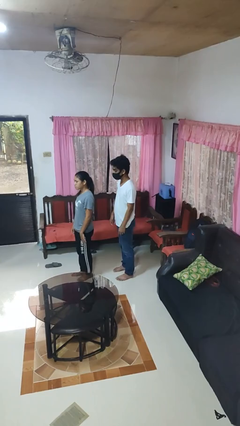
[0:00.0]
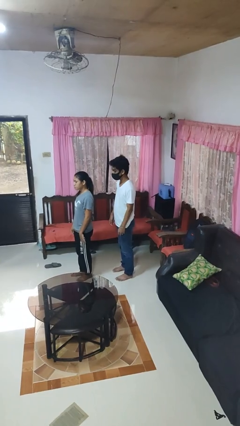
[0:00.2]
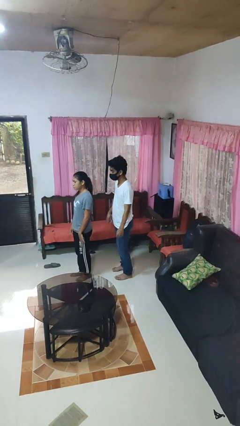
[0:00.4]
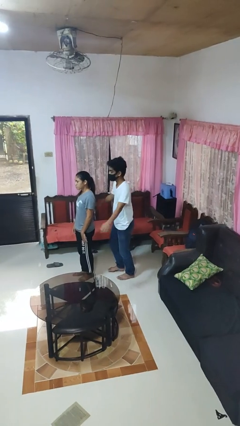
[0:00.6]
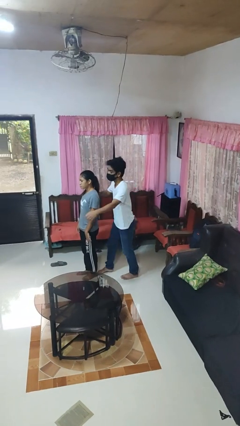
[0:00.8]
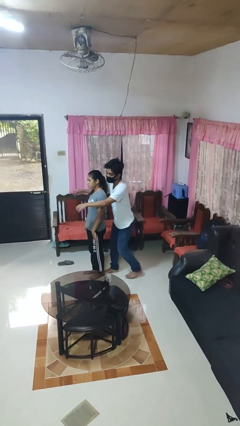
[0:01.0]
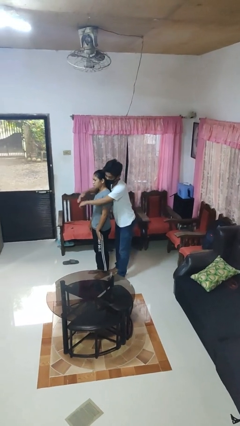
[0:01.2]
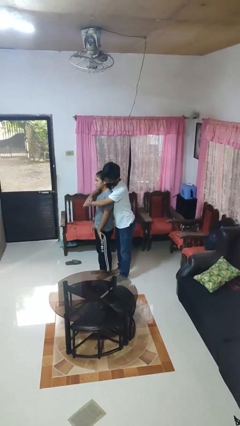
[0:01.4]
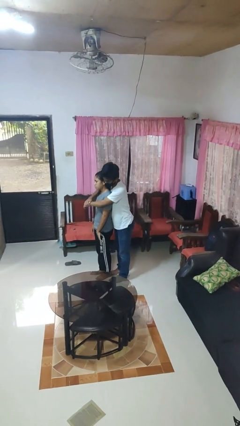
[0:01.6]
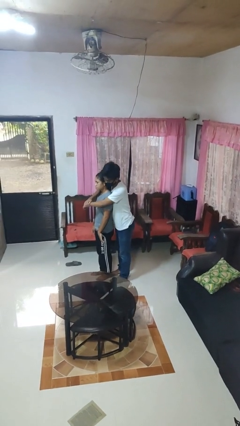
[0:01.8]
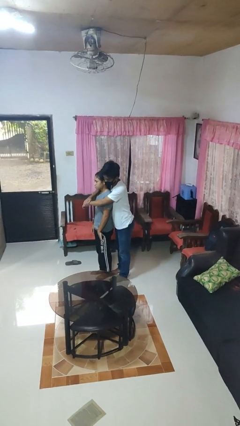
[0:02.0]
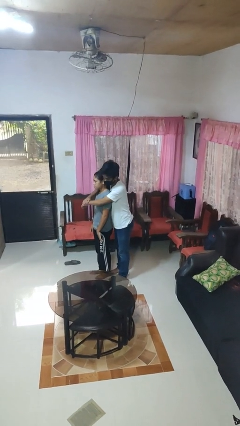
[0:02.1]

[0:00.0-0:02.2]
person hugs person from behind

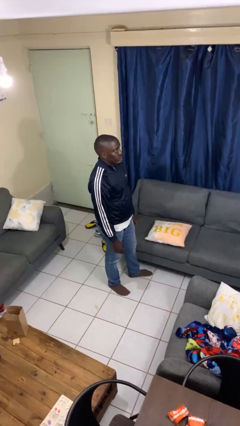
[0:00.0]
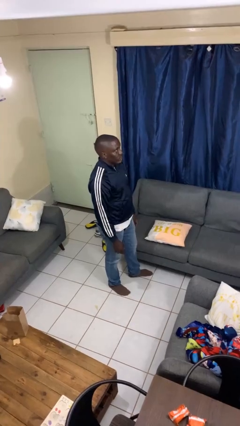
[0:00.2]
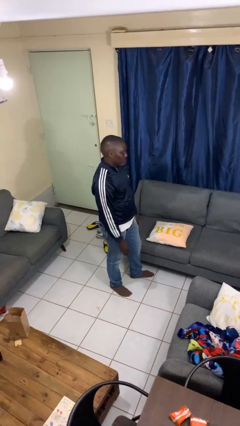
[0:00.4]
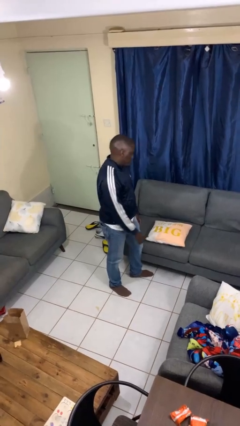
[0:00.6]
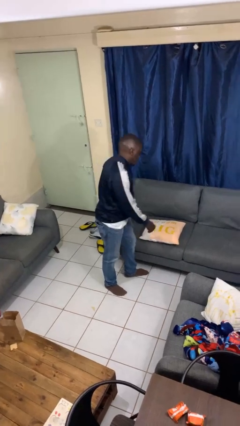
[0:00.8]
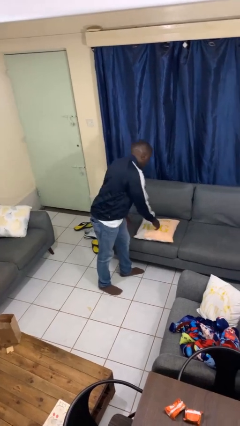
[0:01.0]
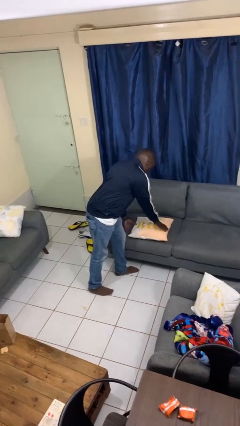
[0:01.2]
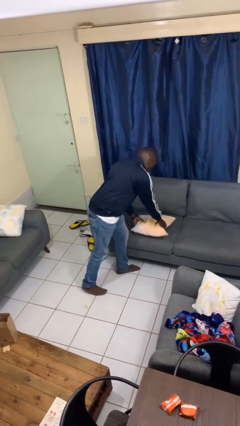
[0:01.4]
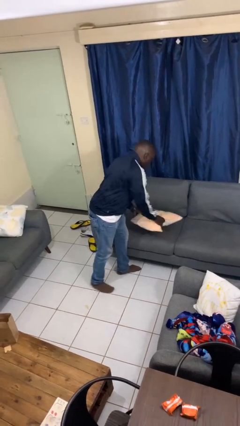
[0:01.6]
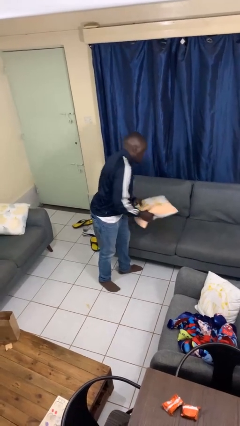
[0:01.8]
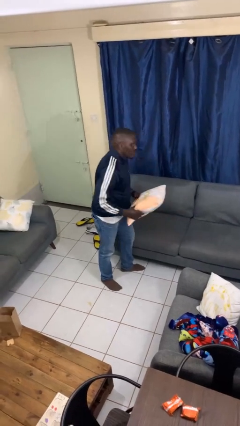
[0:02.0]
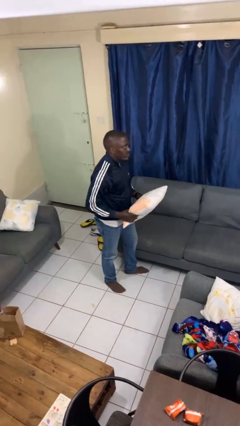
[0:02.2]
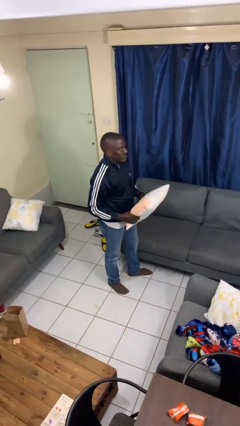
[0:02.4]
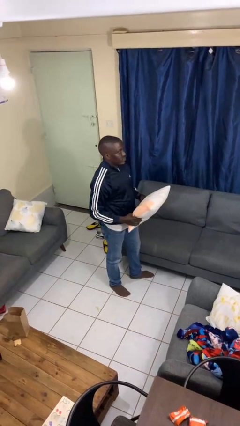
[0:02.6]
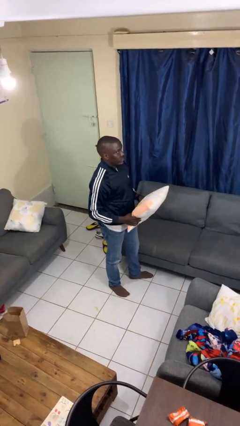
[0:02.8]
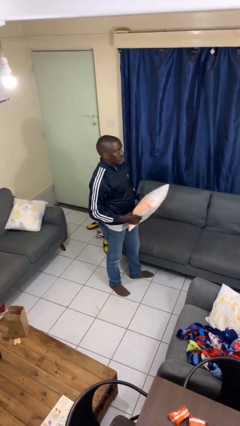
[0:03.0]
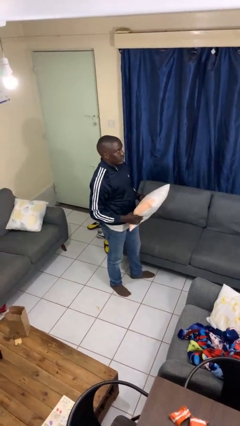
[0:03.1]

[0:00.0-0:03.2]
person picks up object from couch

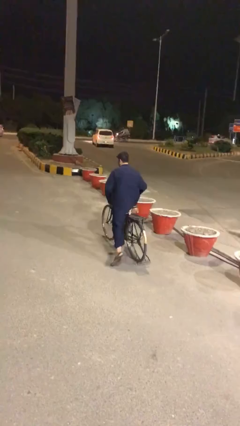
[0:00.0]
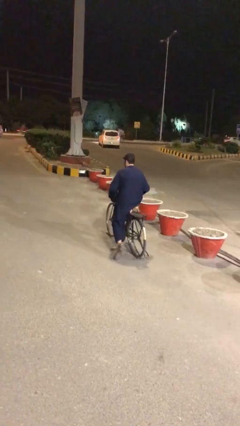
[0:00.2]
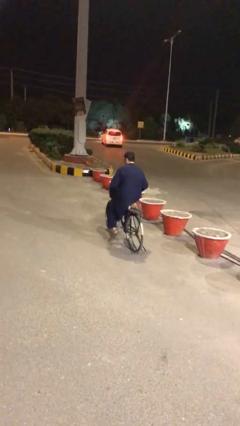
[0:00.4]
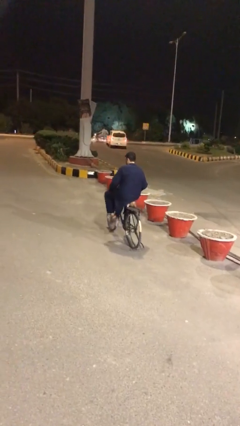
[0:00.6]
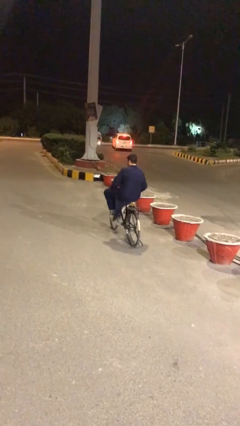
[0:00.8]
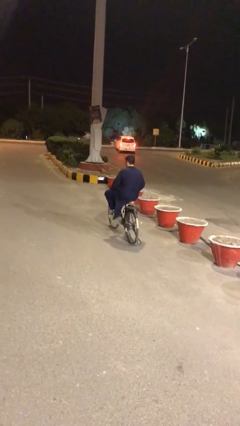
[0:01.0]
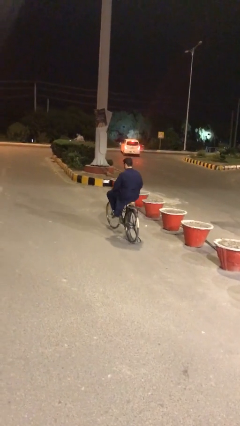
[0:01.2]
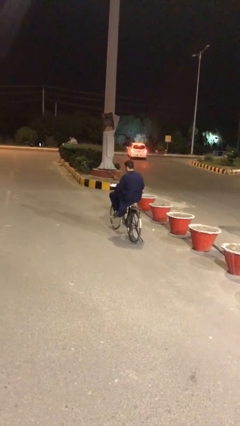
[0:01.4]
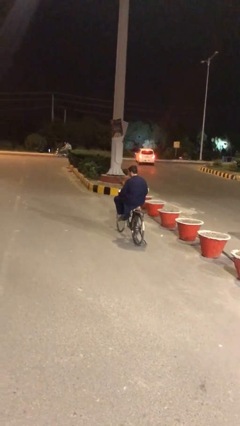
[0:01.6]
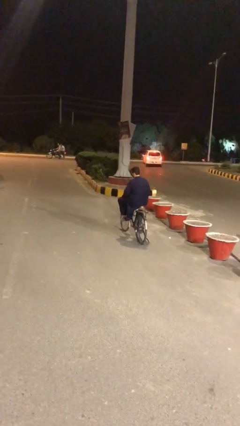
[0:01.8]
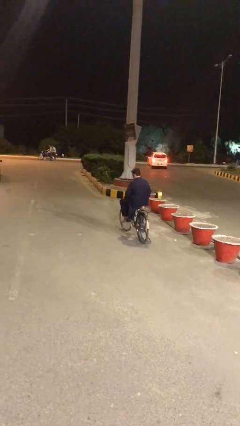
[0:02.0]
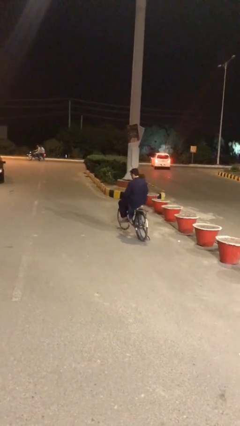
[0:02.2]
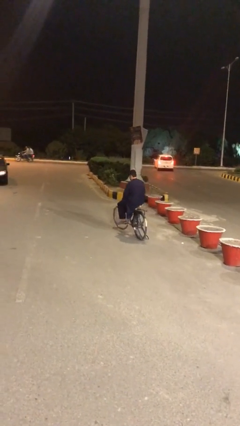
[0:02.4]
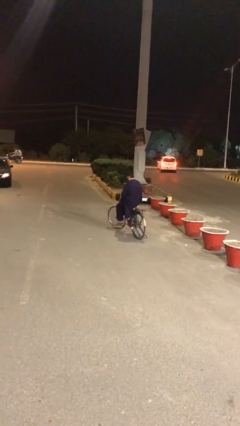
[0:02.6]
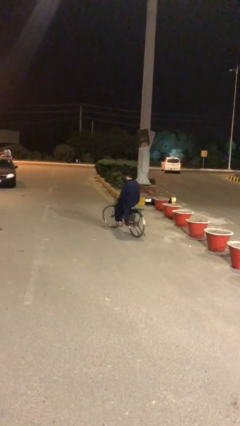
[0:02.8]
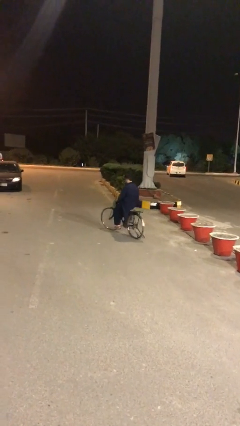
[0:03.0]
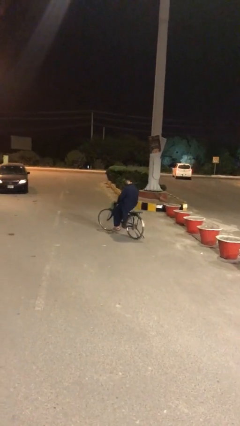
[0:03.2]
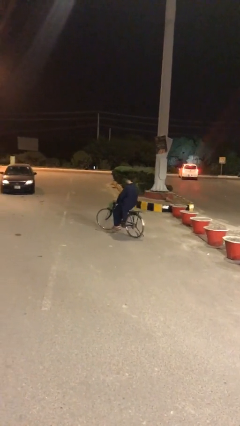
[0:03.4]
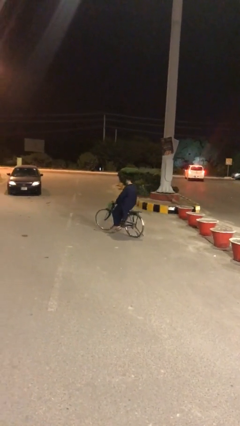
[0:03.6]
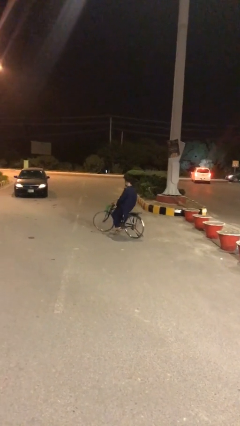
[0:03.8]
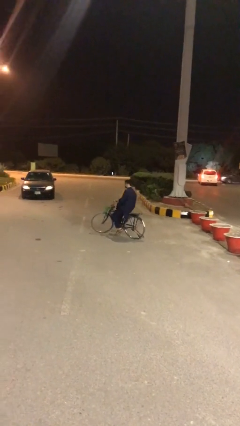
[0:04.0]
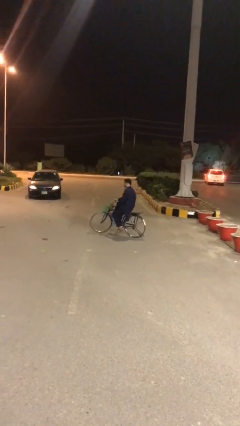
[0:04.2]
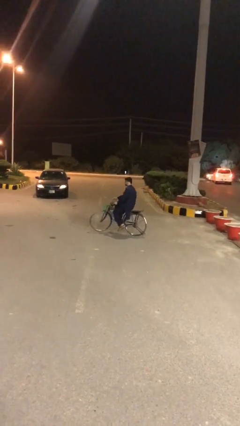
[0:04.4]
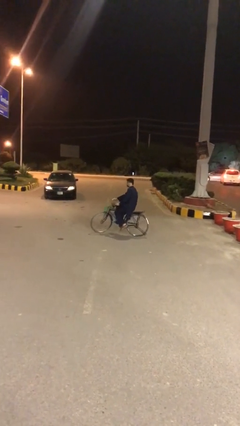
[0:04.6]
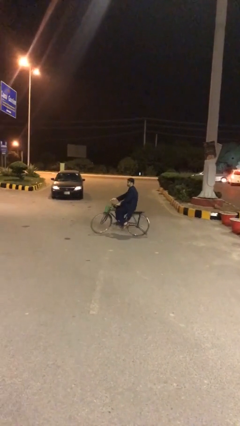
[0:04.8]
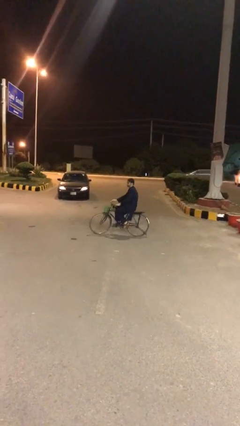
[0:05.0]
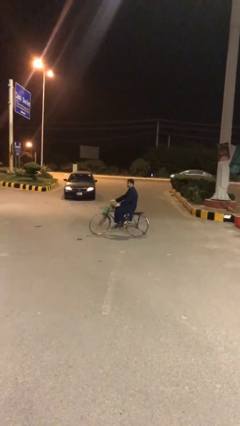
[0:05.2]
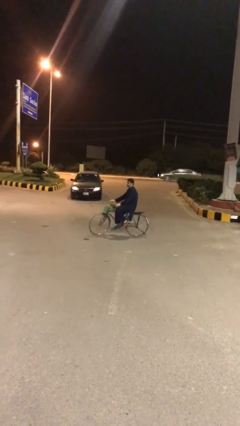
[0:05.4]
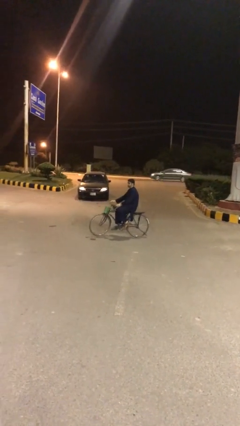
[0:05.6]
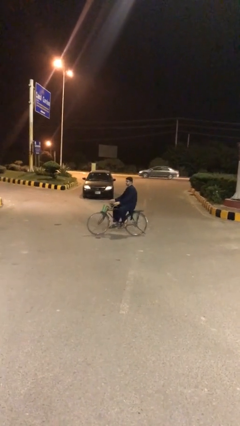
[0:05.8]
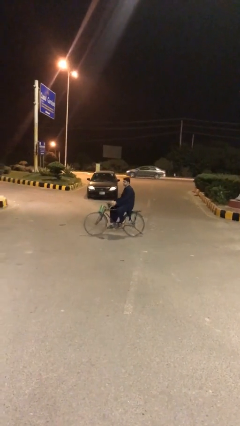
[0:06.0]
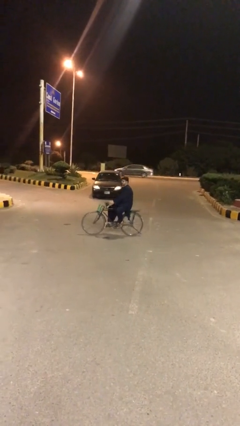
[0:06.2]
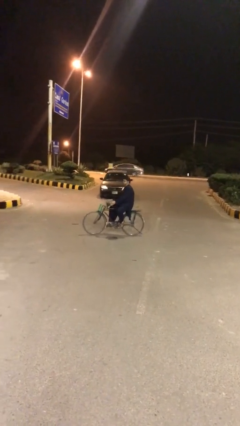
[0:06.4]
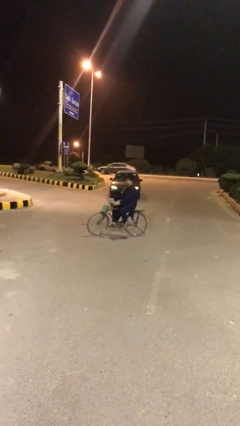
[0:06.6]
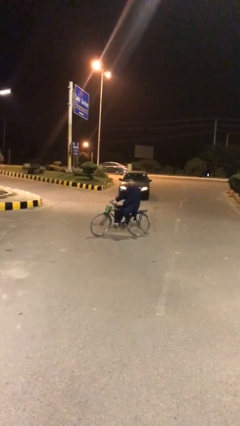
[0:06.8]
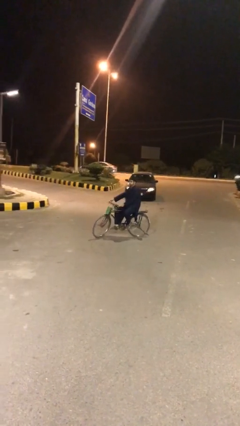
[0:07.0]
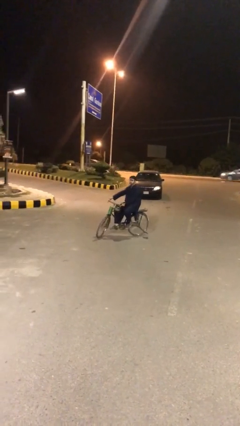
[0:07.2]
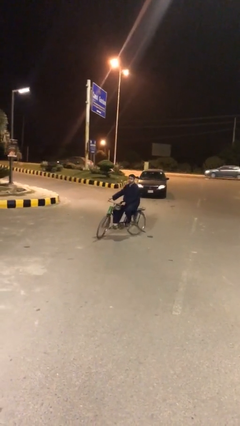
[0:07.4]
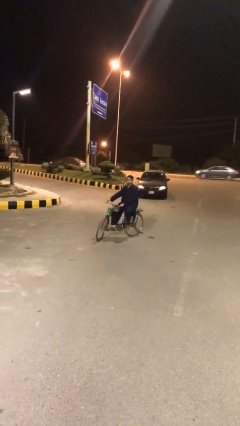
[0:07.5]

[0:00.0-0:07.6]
person rides bicycle

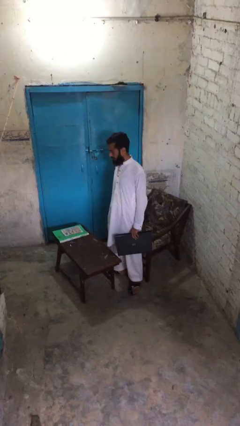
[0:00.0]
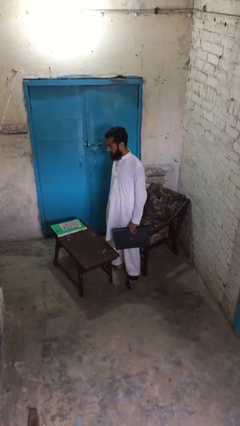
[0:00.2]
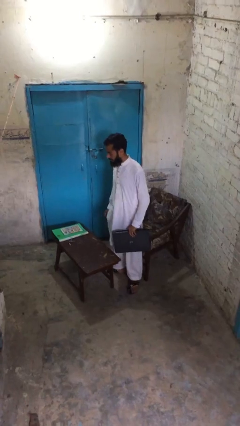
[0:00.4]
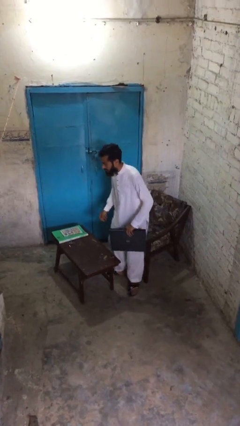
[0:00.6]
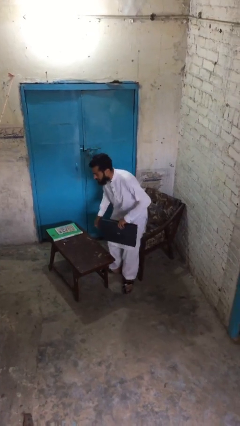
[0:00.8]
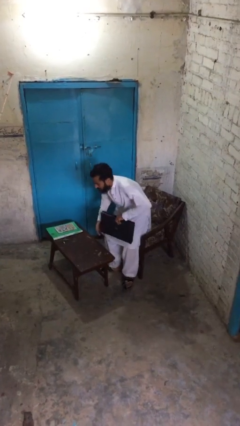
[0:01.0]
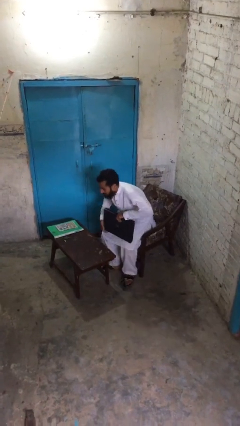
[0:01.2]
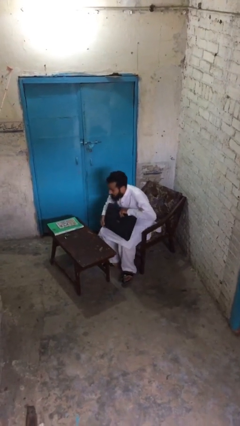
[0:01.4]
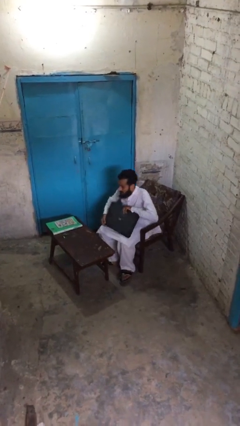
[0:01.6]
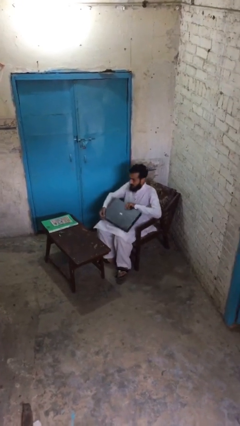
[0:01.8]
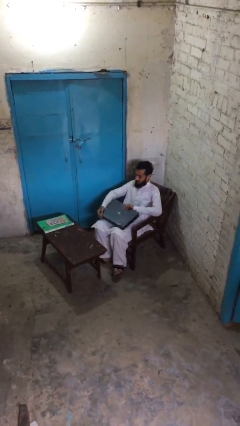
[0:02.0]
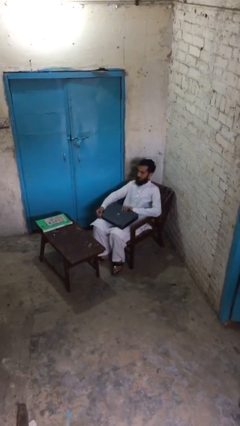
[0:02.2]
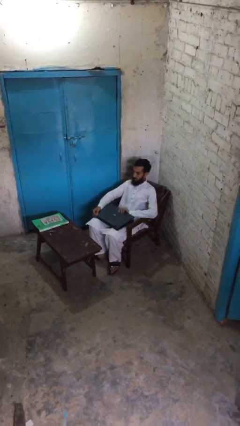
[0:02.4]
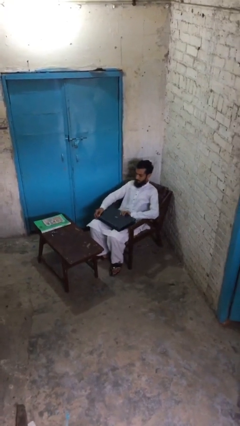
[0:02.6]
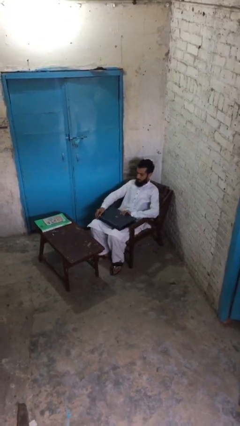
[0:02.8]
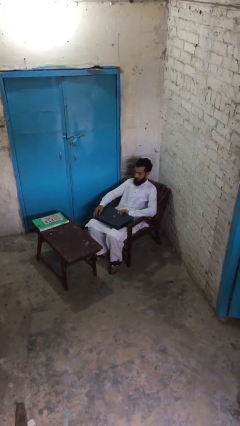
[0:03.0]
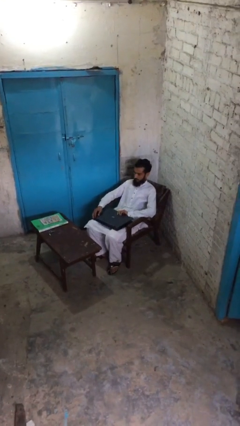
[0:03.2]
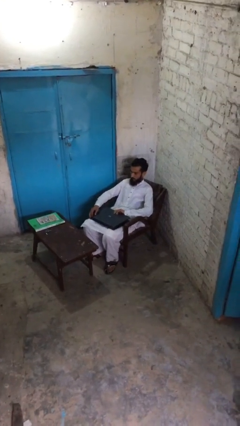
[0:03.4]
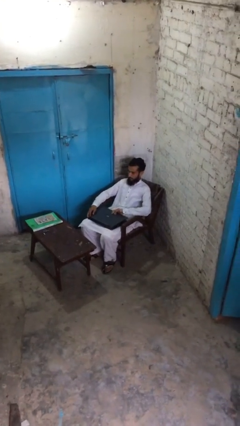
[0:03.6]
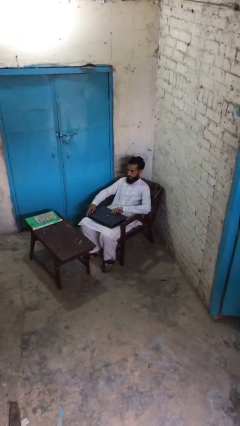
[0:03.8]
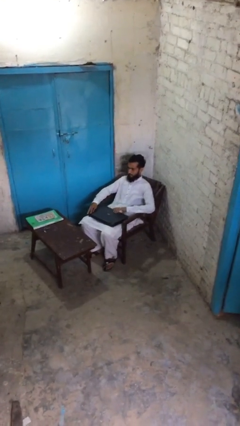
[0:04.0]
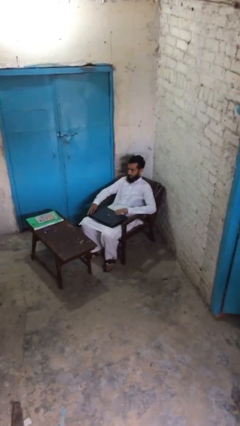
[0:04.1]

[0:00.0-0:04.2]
person sits down

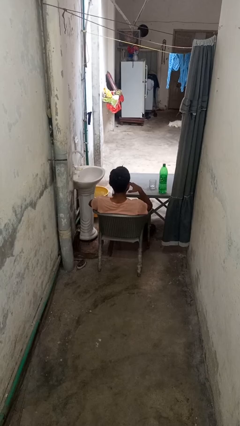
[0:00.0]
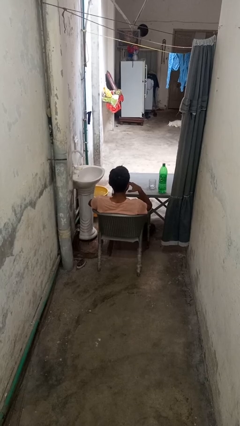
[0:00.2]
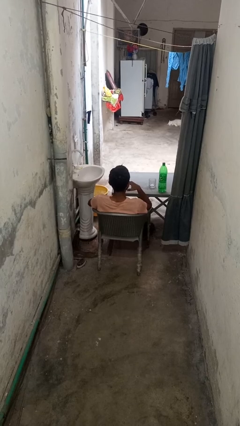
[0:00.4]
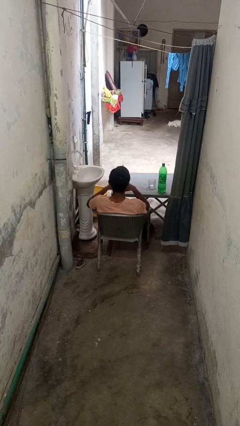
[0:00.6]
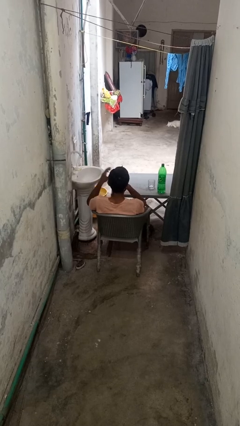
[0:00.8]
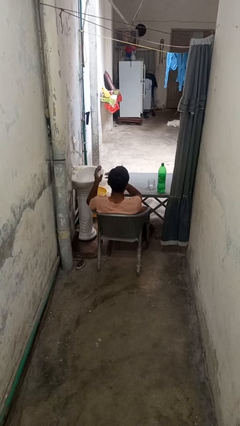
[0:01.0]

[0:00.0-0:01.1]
person claps hands
